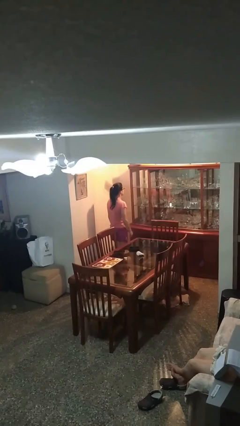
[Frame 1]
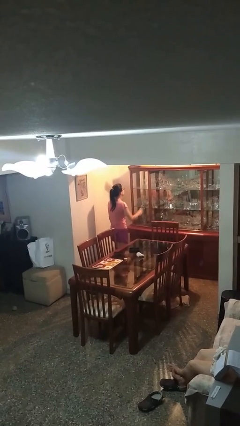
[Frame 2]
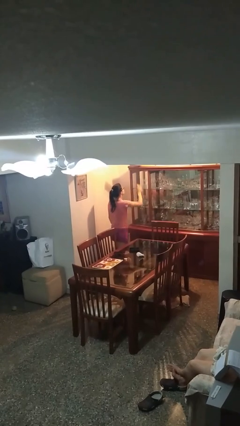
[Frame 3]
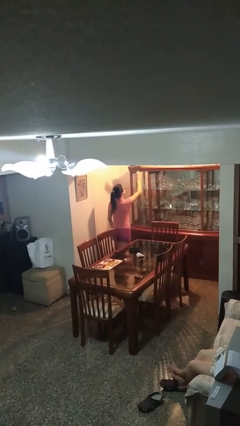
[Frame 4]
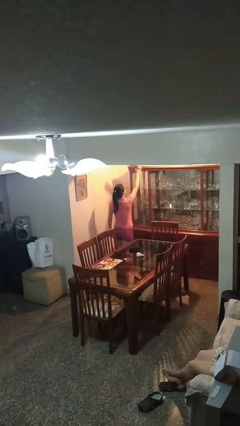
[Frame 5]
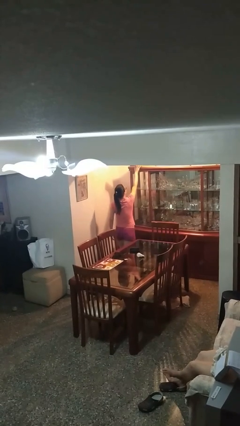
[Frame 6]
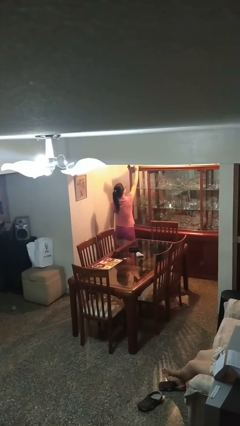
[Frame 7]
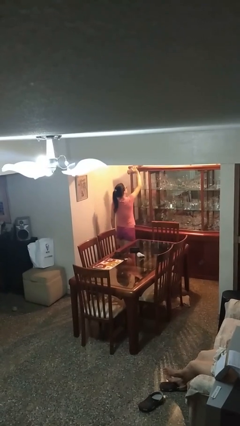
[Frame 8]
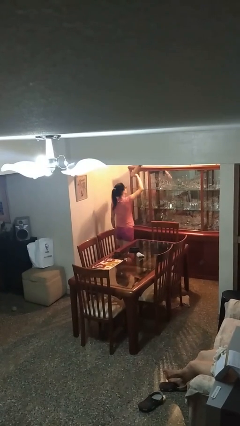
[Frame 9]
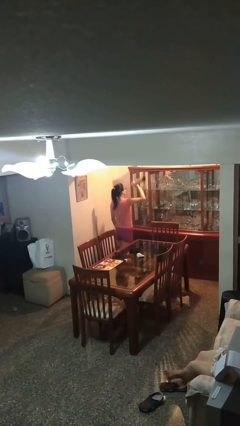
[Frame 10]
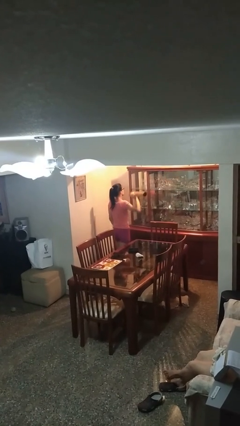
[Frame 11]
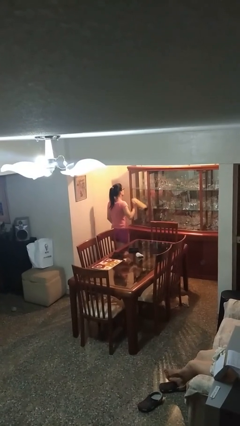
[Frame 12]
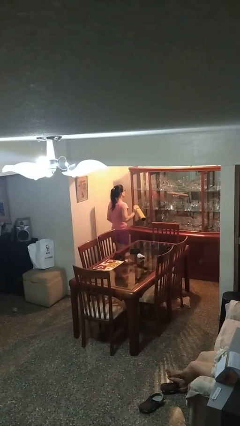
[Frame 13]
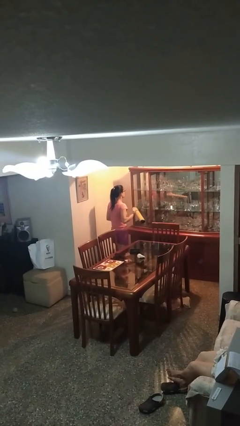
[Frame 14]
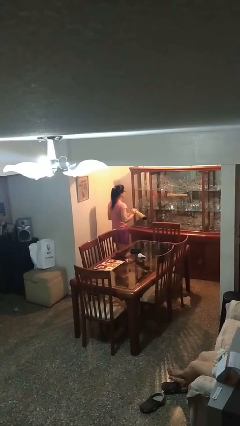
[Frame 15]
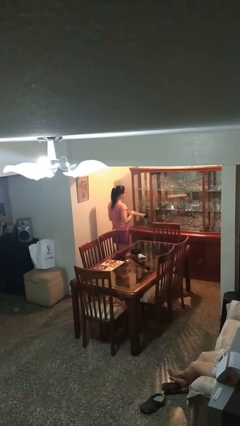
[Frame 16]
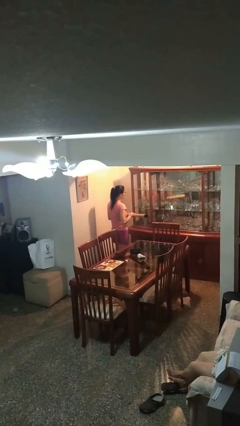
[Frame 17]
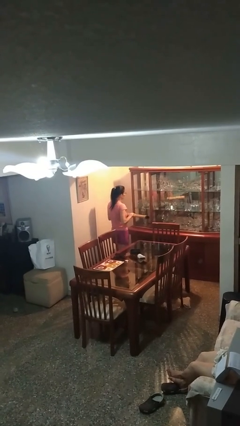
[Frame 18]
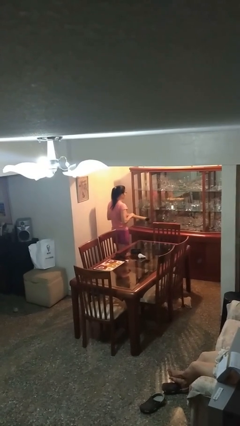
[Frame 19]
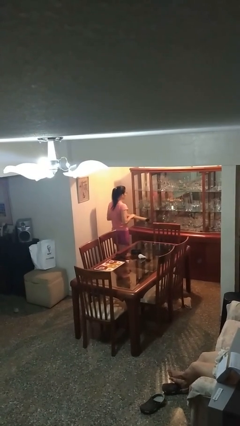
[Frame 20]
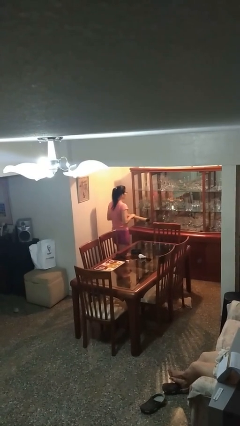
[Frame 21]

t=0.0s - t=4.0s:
person picks up object from shelf

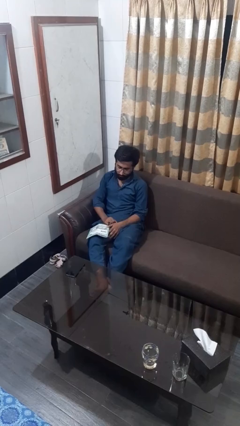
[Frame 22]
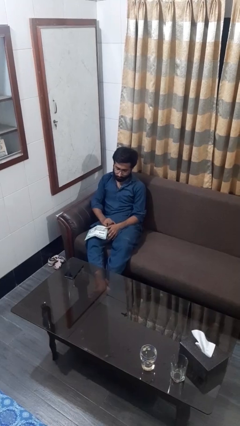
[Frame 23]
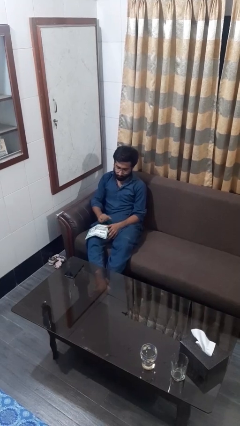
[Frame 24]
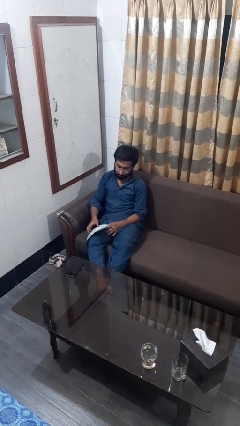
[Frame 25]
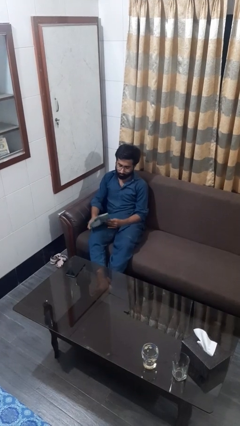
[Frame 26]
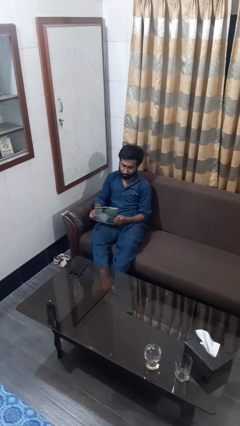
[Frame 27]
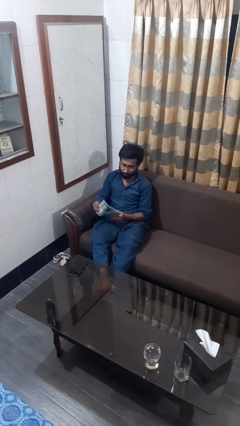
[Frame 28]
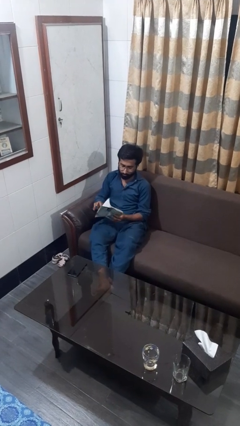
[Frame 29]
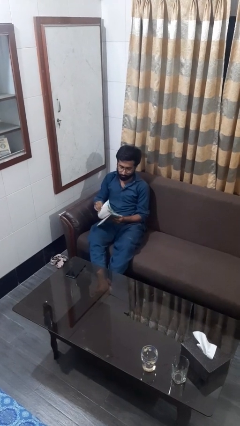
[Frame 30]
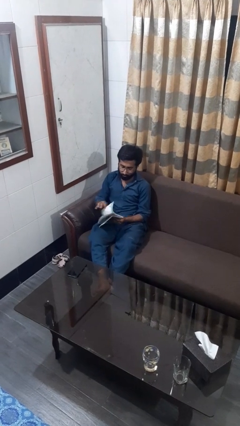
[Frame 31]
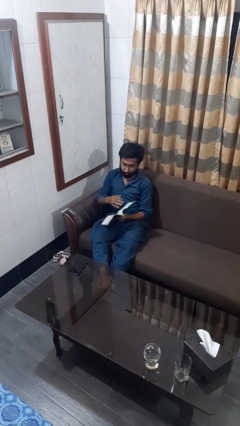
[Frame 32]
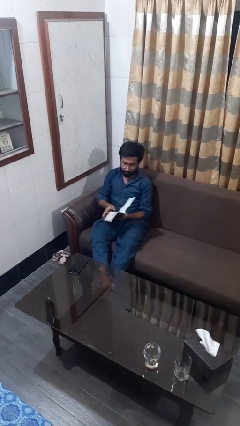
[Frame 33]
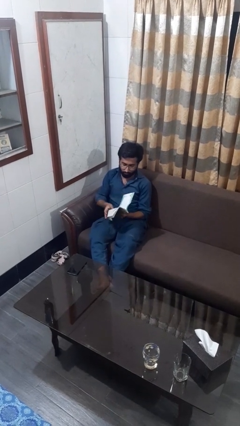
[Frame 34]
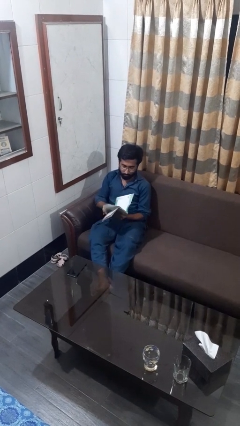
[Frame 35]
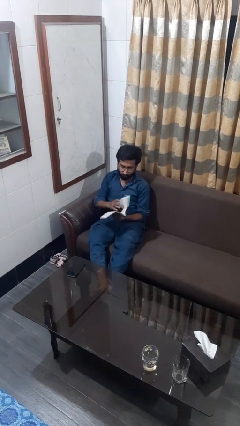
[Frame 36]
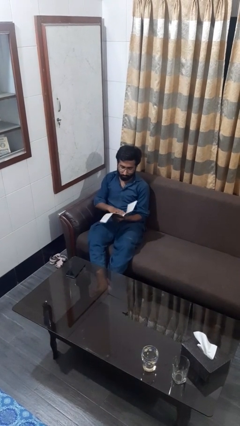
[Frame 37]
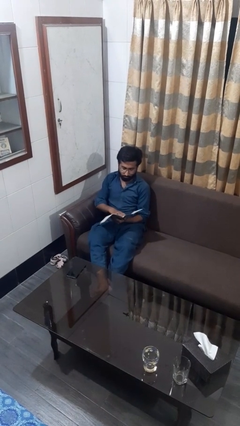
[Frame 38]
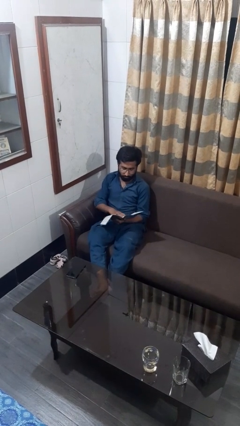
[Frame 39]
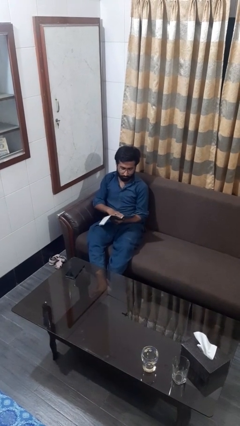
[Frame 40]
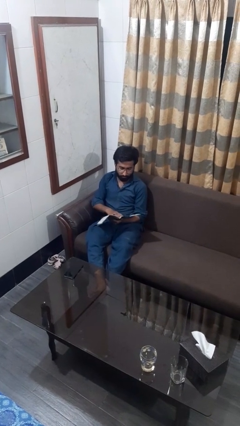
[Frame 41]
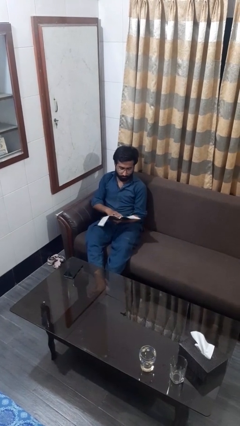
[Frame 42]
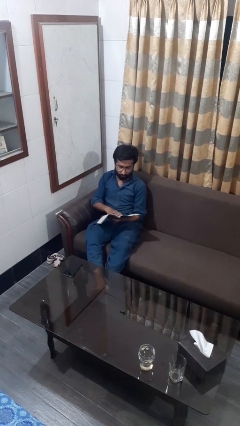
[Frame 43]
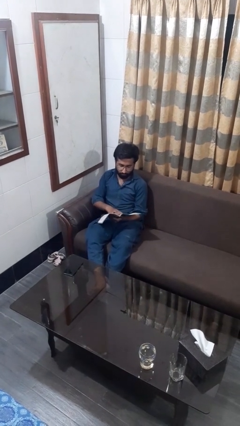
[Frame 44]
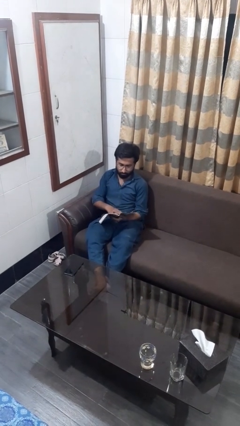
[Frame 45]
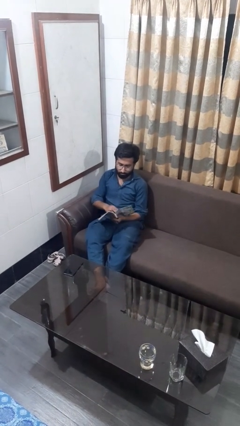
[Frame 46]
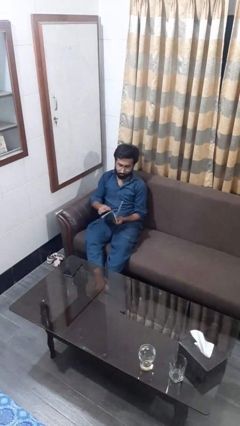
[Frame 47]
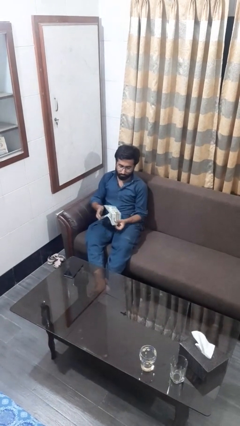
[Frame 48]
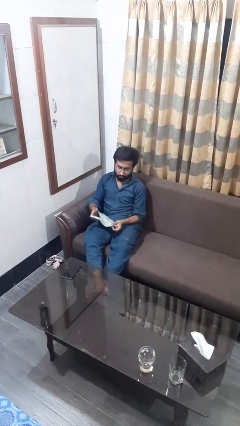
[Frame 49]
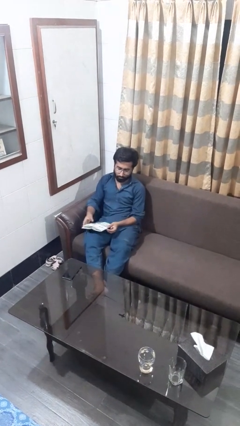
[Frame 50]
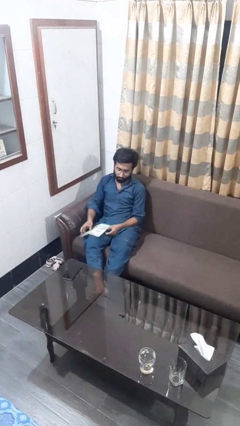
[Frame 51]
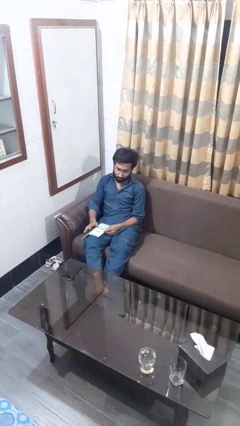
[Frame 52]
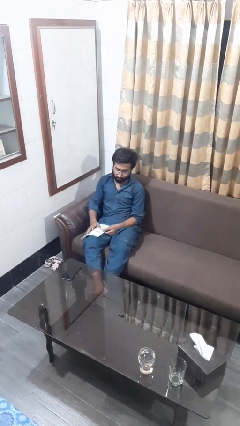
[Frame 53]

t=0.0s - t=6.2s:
person reads magazine

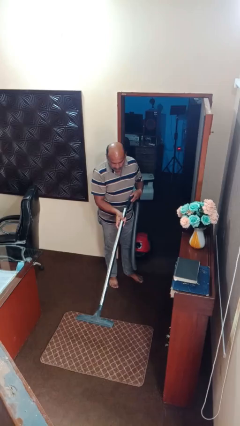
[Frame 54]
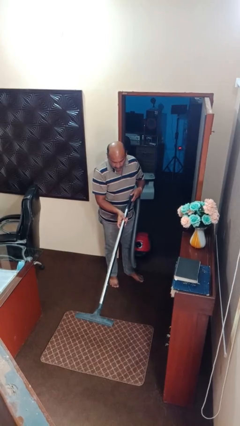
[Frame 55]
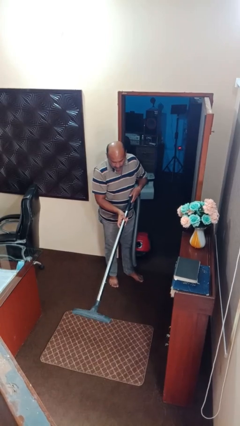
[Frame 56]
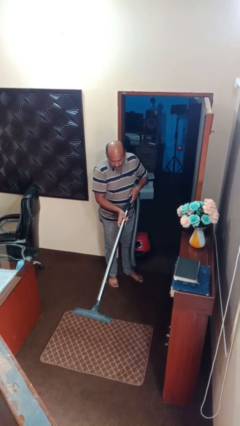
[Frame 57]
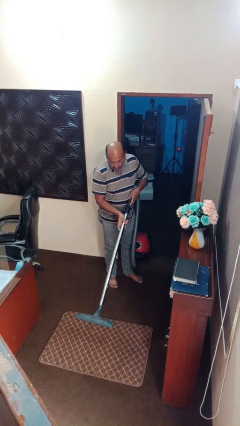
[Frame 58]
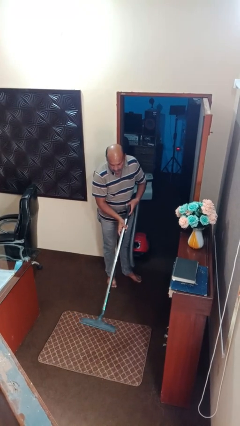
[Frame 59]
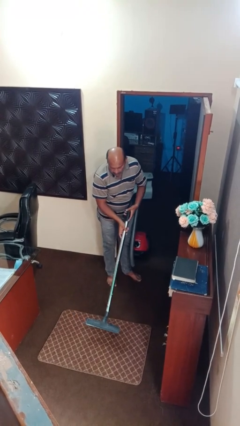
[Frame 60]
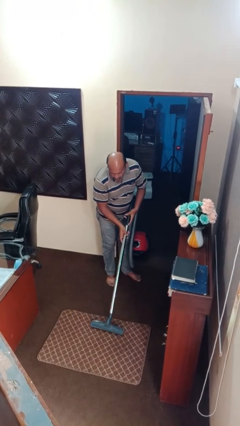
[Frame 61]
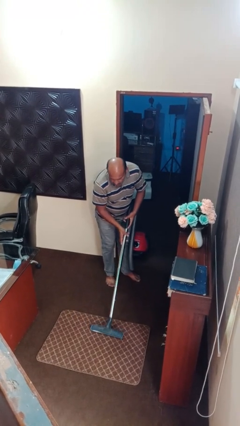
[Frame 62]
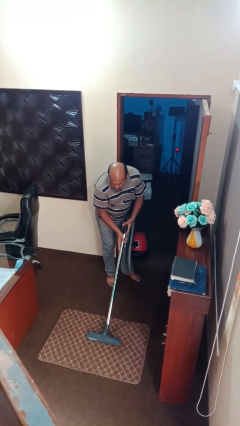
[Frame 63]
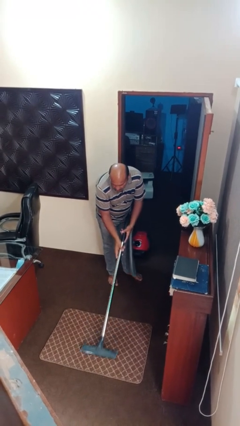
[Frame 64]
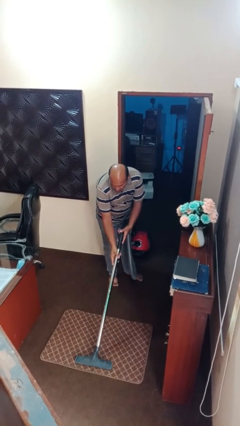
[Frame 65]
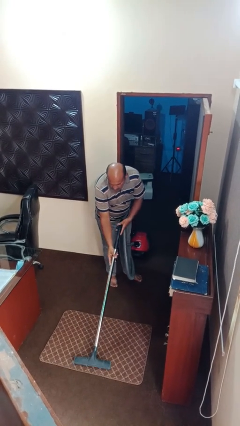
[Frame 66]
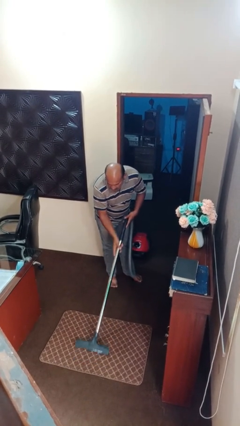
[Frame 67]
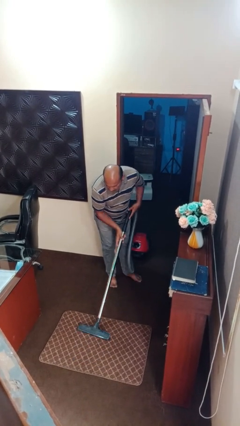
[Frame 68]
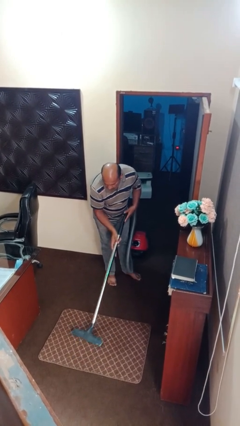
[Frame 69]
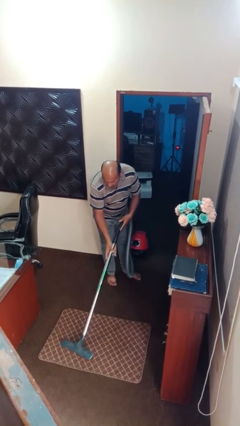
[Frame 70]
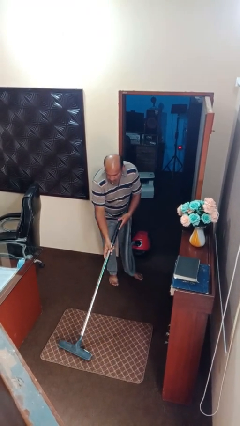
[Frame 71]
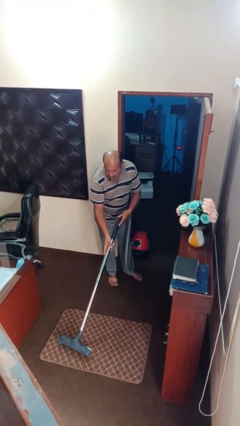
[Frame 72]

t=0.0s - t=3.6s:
person vacuums carpet

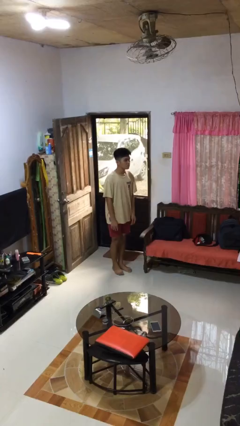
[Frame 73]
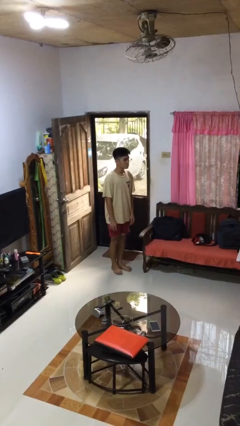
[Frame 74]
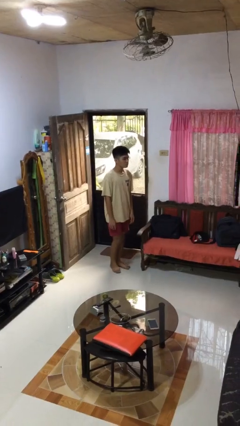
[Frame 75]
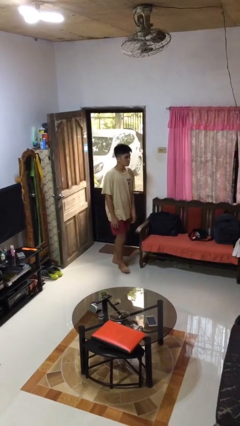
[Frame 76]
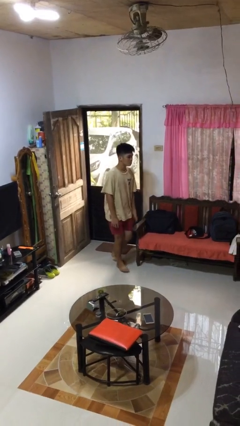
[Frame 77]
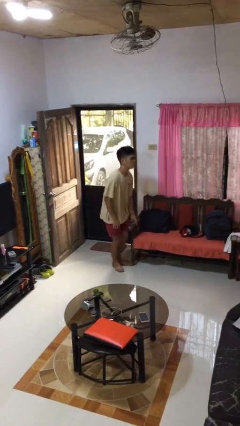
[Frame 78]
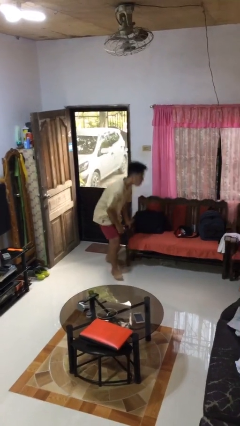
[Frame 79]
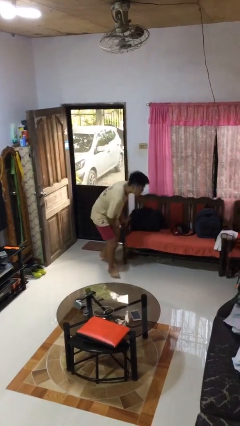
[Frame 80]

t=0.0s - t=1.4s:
person trips on object on floor

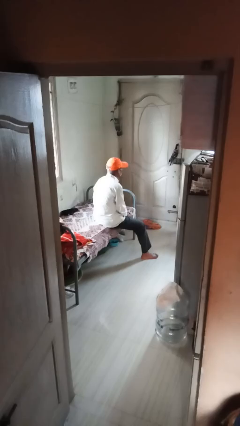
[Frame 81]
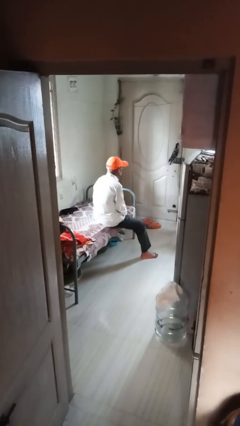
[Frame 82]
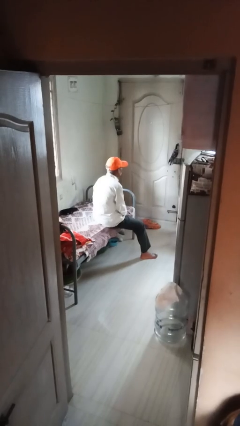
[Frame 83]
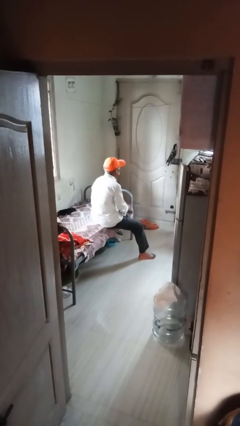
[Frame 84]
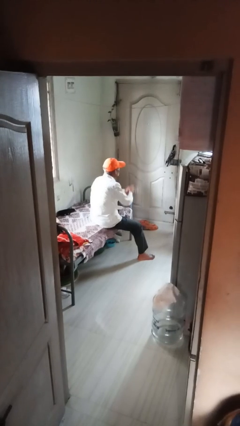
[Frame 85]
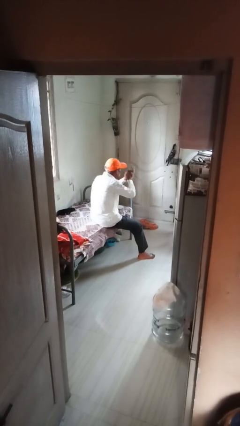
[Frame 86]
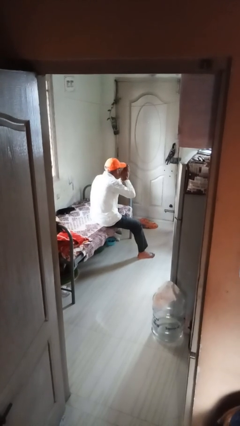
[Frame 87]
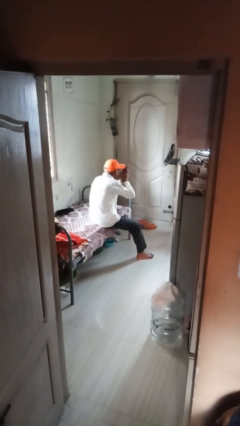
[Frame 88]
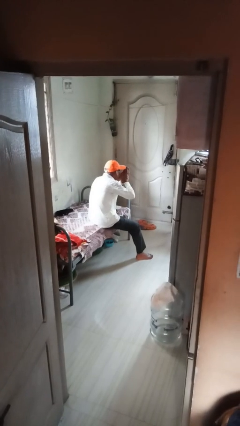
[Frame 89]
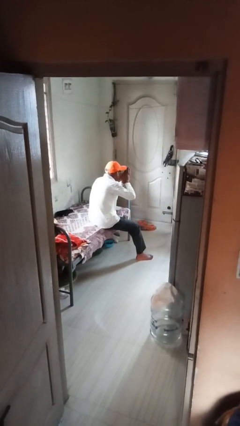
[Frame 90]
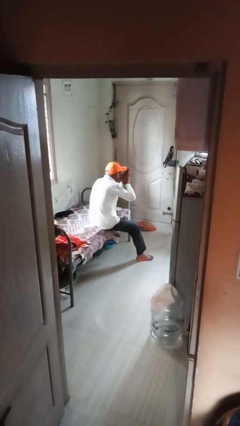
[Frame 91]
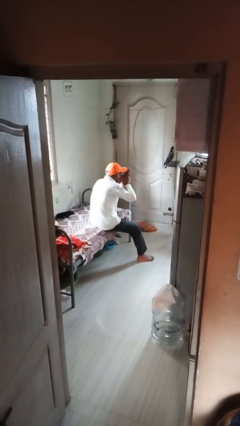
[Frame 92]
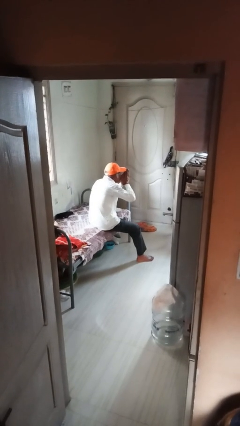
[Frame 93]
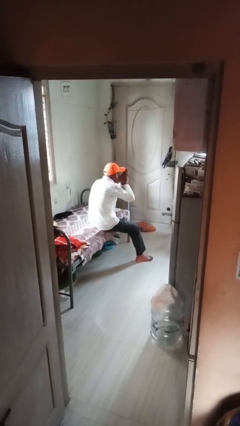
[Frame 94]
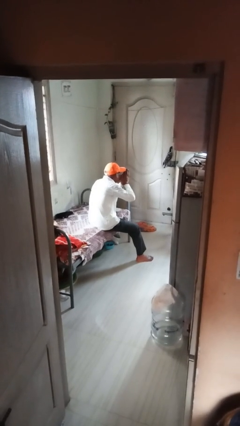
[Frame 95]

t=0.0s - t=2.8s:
person prays
